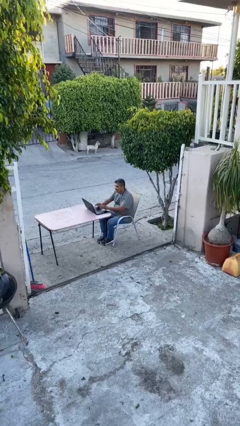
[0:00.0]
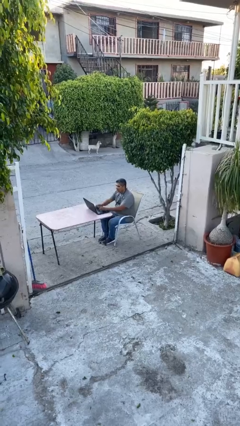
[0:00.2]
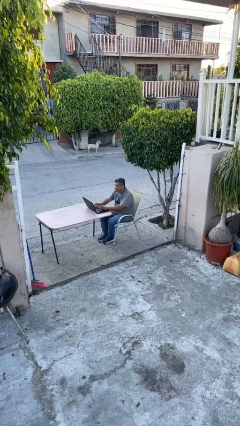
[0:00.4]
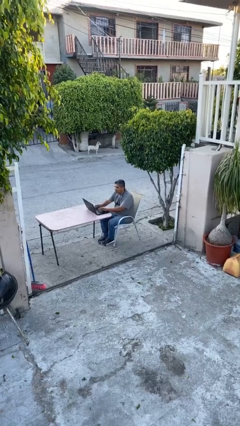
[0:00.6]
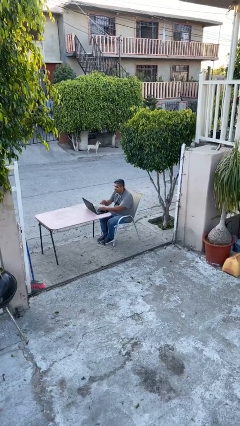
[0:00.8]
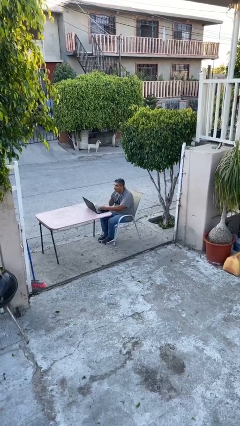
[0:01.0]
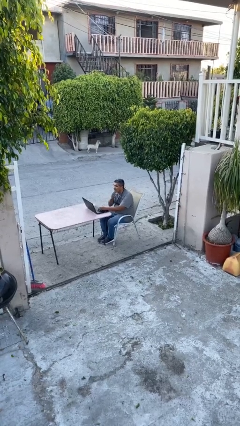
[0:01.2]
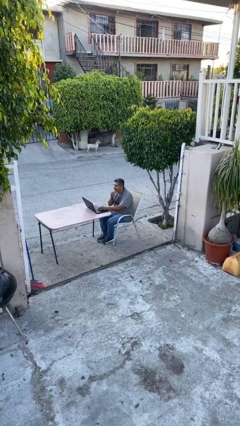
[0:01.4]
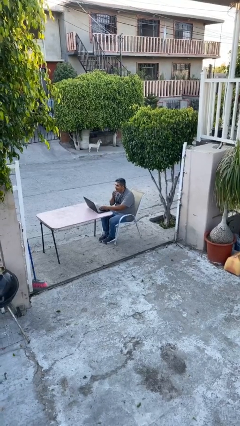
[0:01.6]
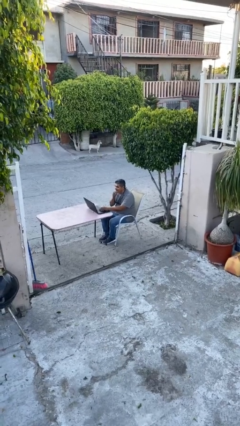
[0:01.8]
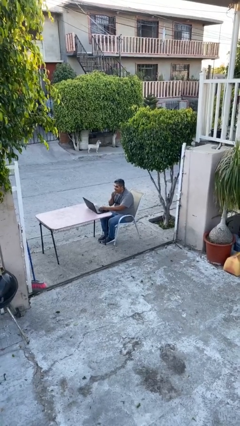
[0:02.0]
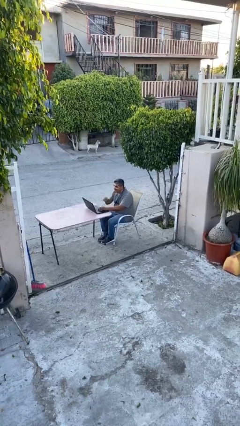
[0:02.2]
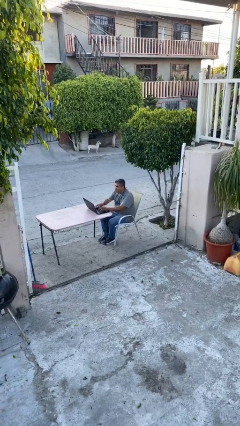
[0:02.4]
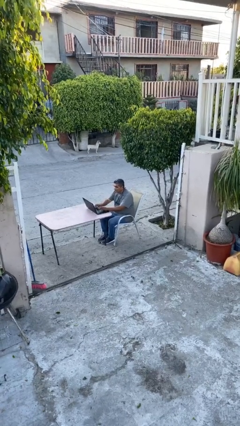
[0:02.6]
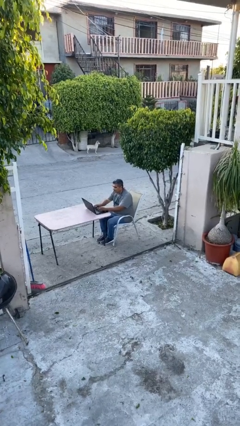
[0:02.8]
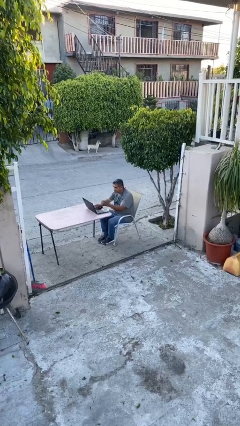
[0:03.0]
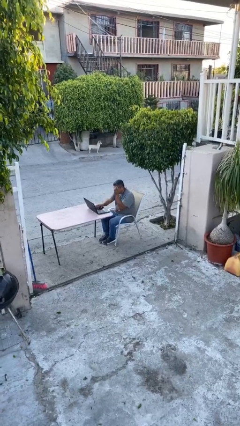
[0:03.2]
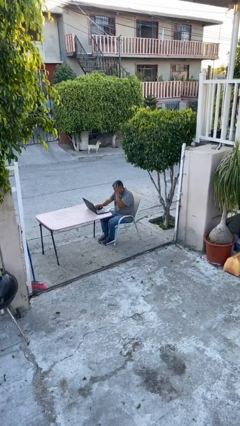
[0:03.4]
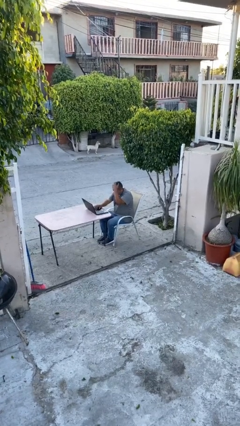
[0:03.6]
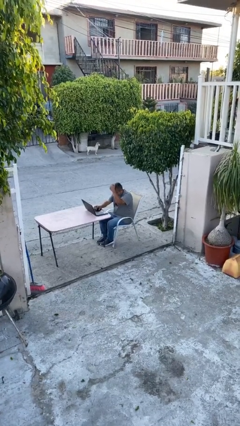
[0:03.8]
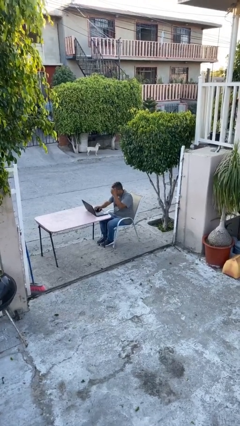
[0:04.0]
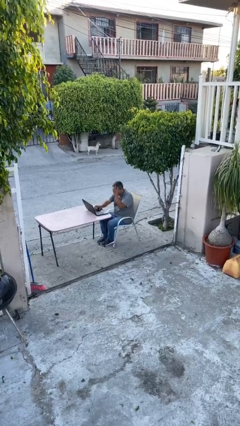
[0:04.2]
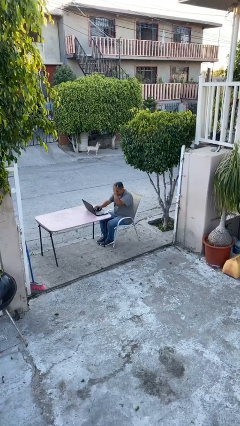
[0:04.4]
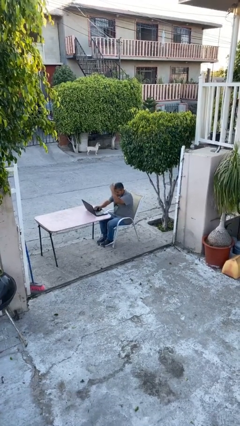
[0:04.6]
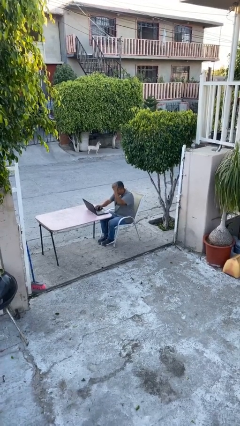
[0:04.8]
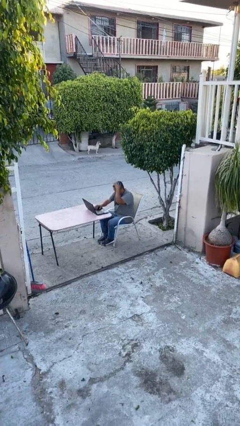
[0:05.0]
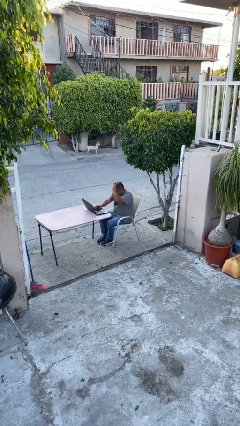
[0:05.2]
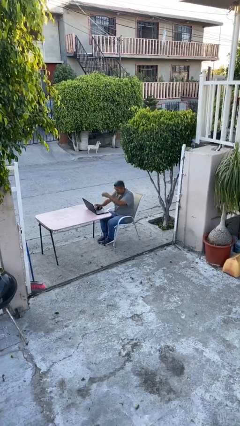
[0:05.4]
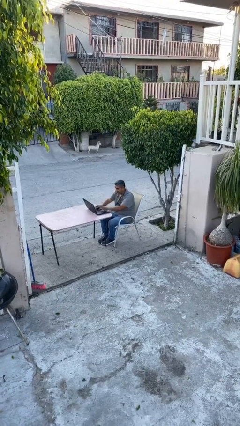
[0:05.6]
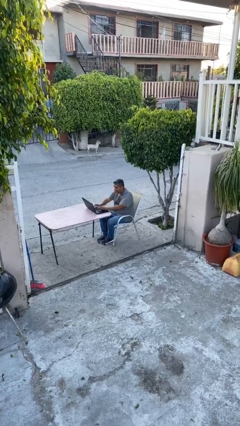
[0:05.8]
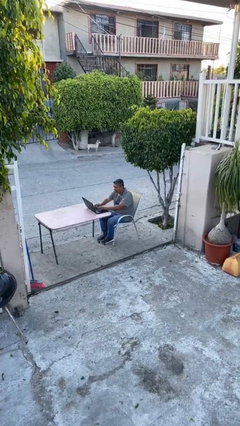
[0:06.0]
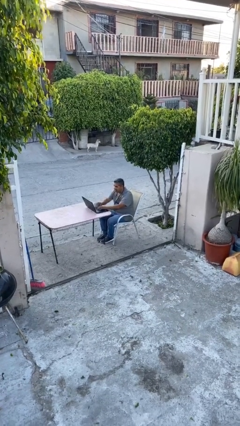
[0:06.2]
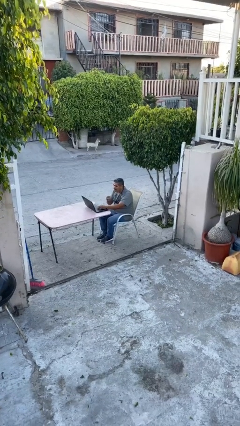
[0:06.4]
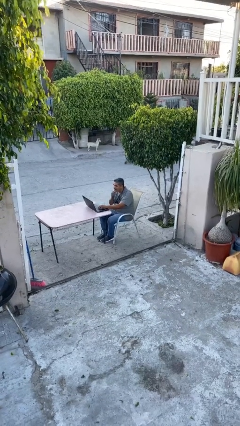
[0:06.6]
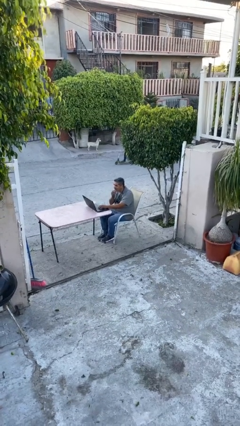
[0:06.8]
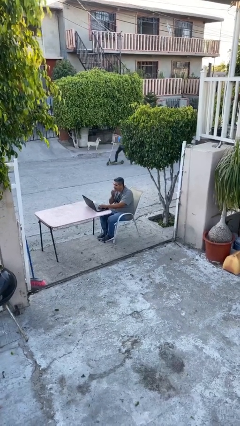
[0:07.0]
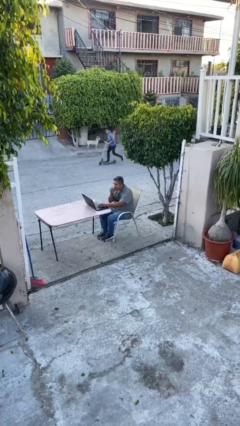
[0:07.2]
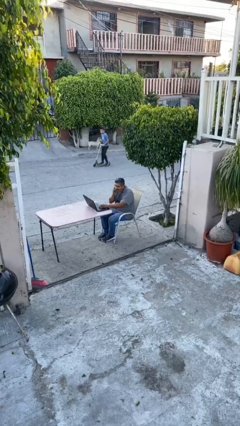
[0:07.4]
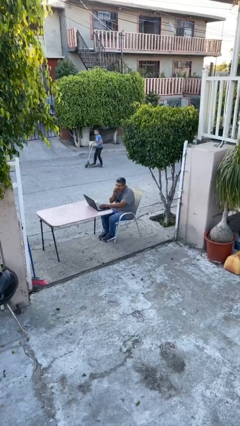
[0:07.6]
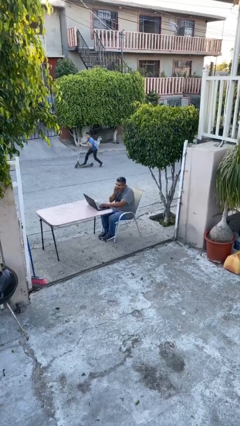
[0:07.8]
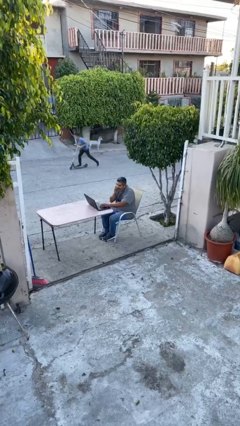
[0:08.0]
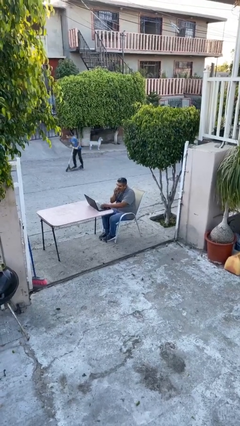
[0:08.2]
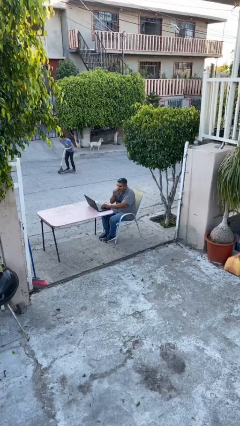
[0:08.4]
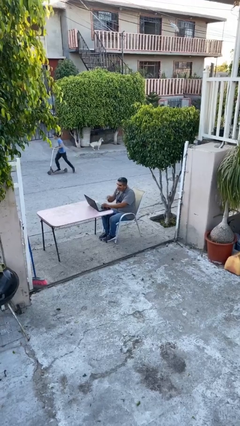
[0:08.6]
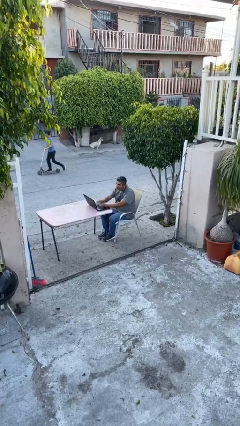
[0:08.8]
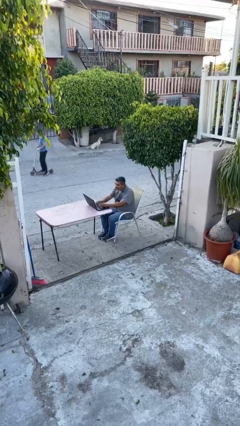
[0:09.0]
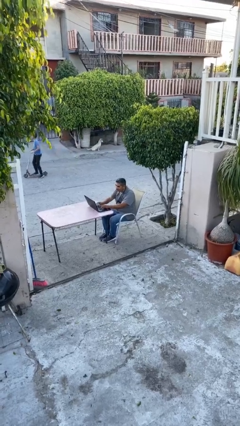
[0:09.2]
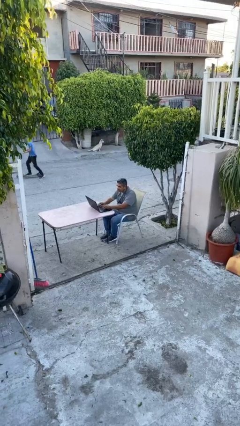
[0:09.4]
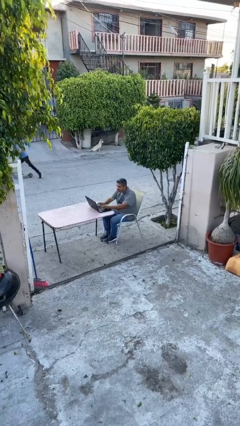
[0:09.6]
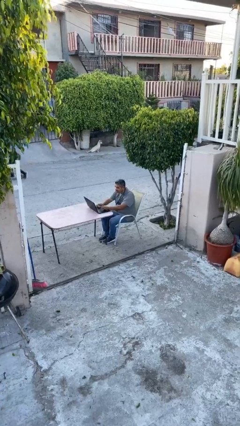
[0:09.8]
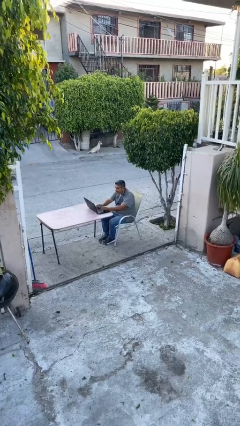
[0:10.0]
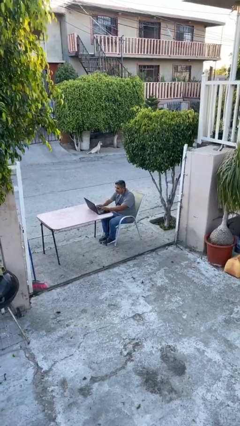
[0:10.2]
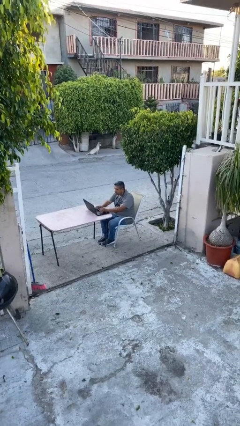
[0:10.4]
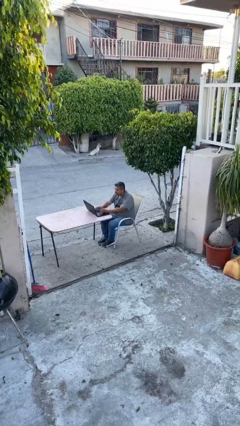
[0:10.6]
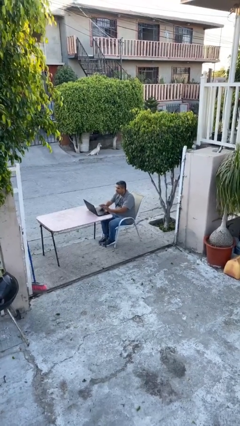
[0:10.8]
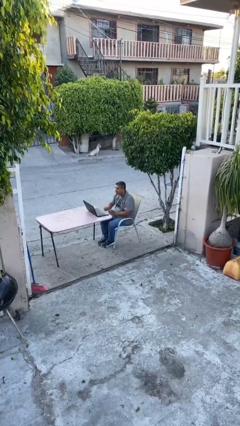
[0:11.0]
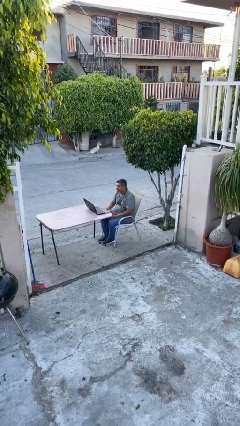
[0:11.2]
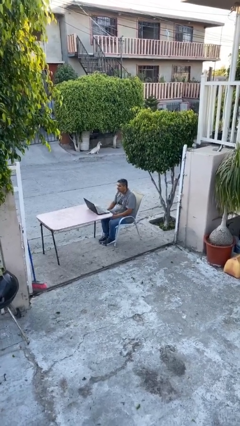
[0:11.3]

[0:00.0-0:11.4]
person interacts with laptop

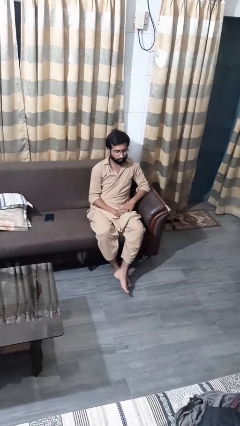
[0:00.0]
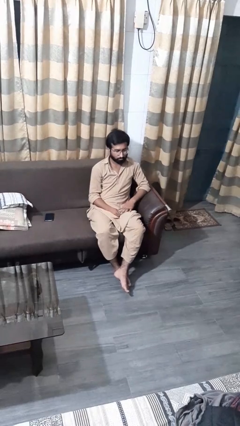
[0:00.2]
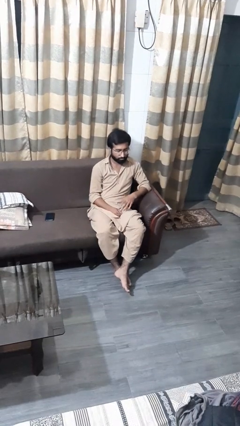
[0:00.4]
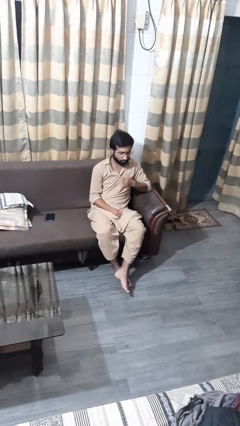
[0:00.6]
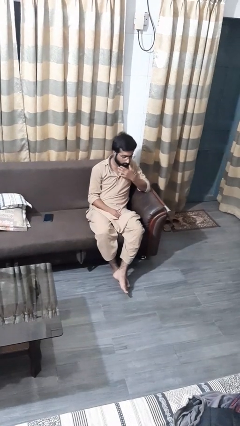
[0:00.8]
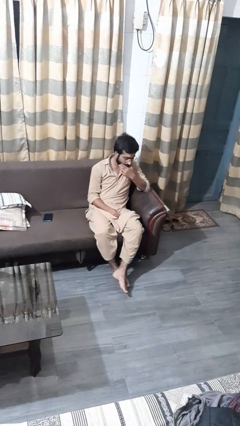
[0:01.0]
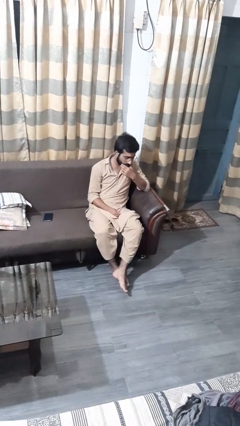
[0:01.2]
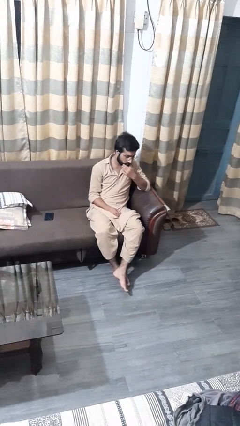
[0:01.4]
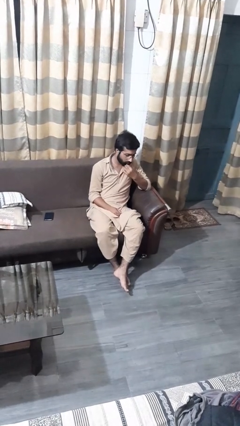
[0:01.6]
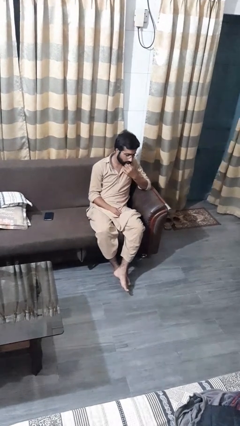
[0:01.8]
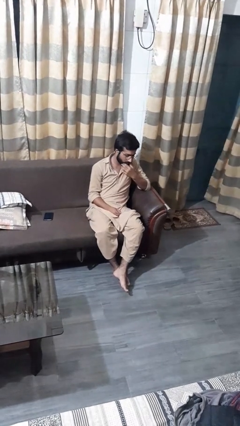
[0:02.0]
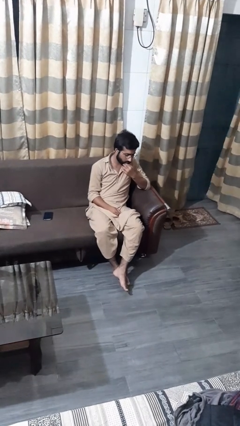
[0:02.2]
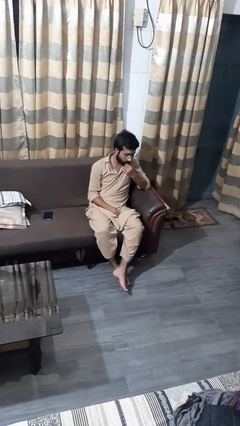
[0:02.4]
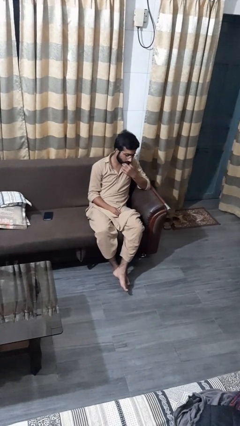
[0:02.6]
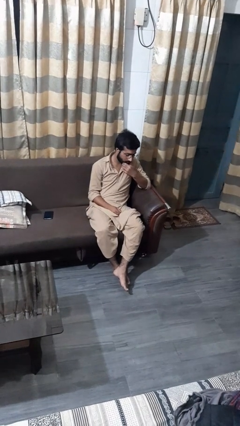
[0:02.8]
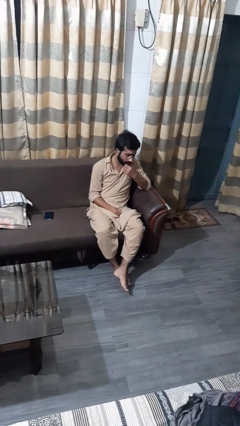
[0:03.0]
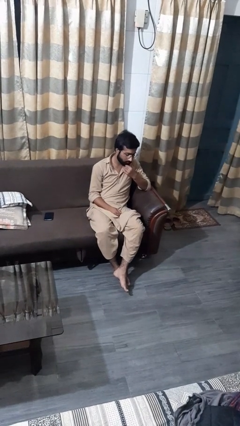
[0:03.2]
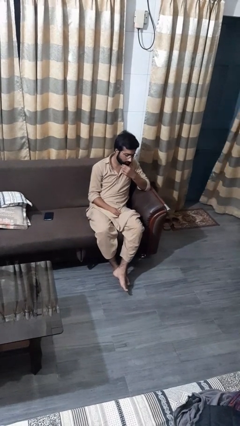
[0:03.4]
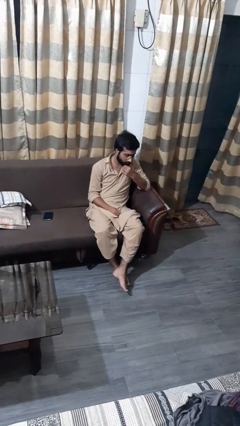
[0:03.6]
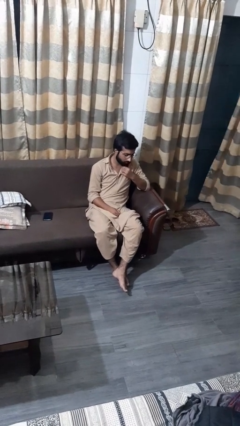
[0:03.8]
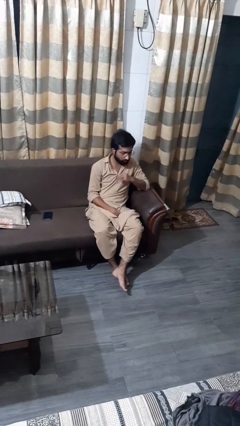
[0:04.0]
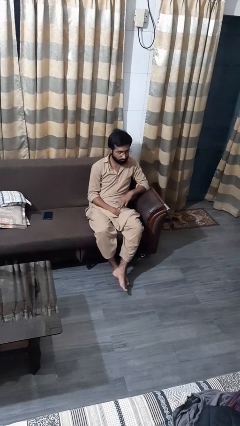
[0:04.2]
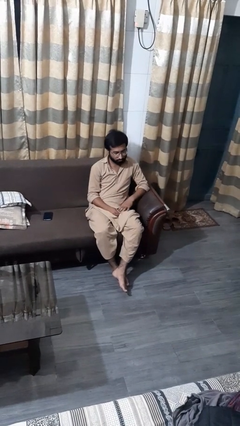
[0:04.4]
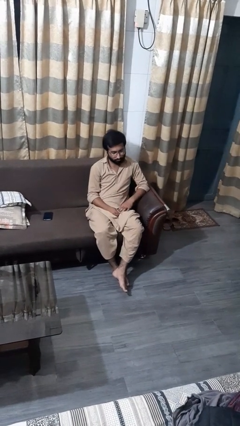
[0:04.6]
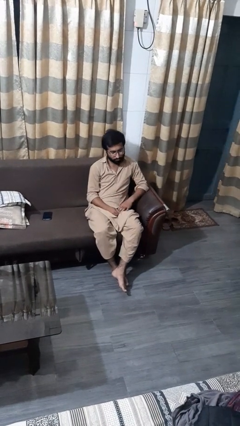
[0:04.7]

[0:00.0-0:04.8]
person strokes chin

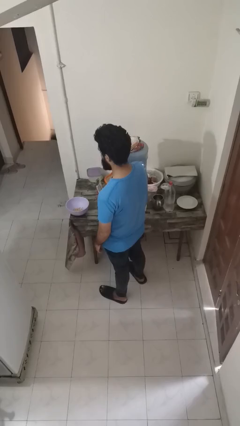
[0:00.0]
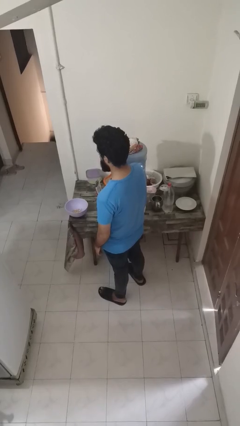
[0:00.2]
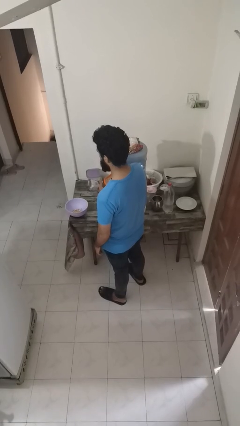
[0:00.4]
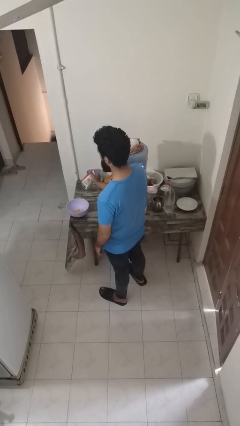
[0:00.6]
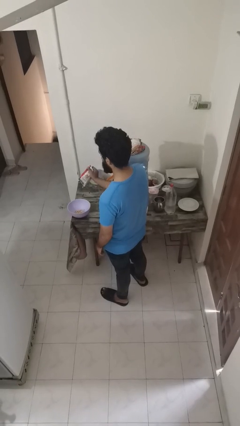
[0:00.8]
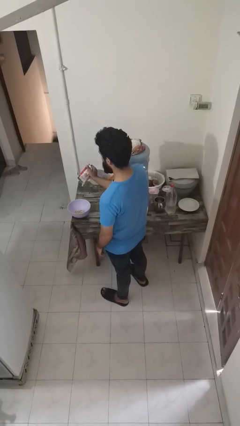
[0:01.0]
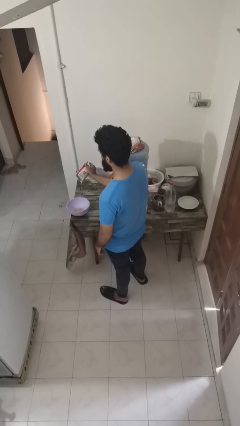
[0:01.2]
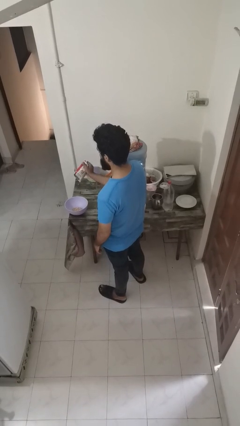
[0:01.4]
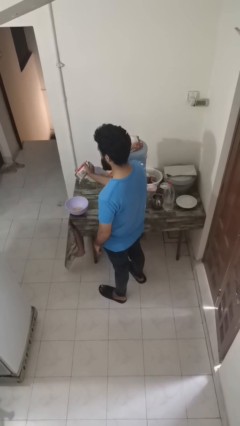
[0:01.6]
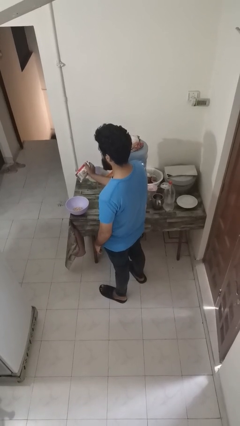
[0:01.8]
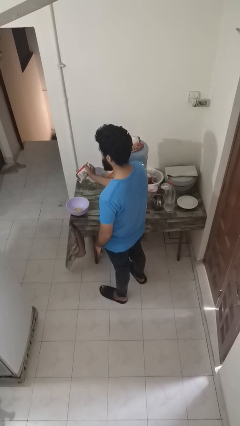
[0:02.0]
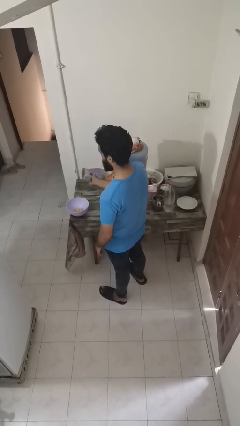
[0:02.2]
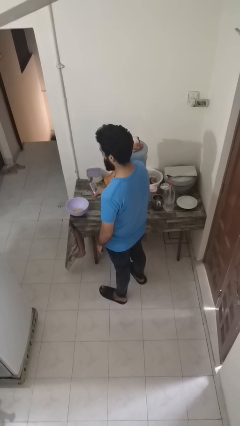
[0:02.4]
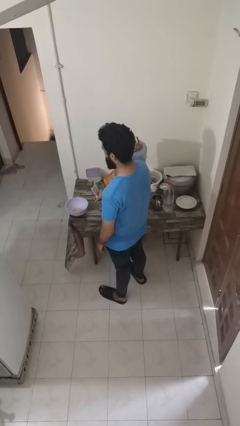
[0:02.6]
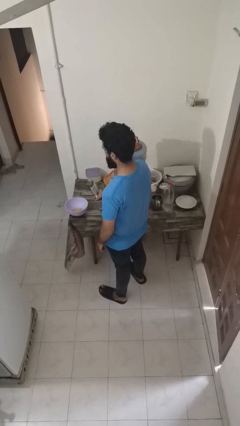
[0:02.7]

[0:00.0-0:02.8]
person pours into bowl
